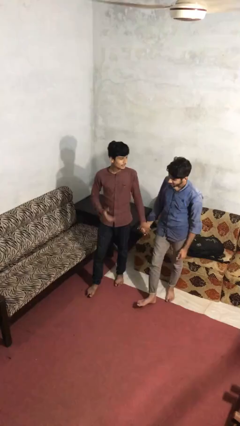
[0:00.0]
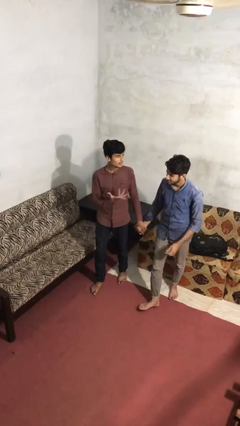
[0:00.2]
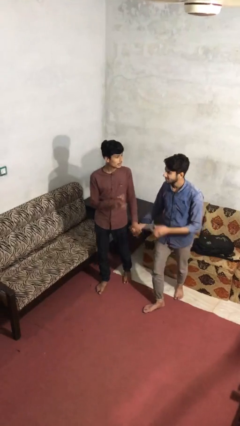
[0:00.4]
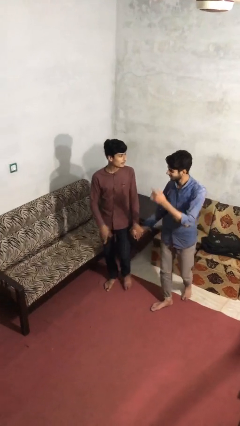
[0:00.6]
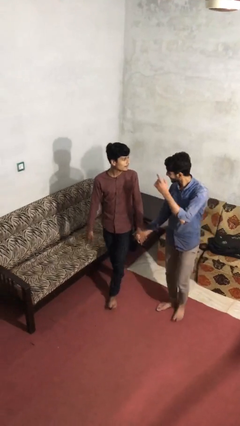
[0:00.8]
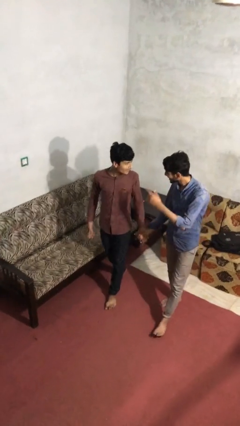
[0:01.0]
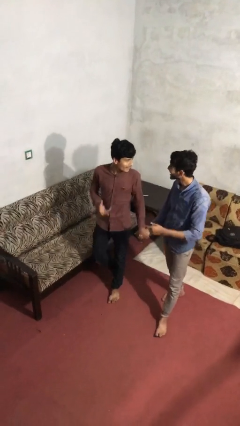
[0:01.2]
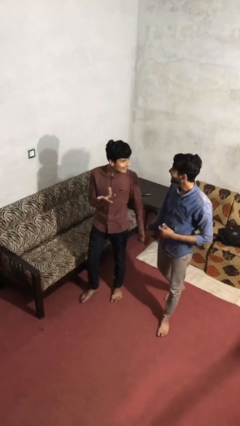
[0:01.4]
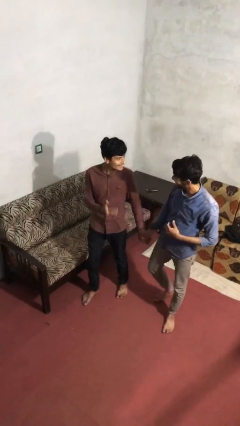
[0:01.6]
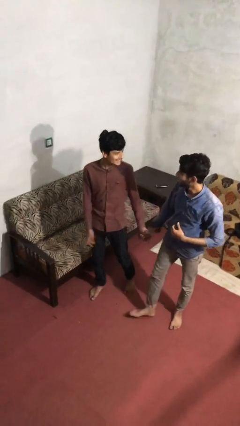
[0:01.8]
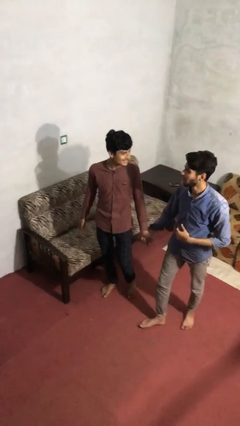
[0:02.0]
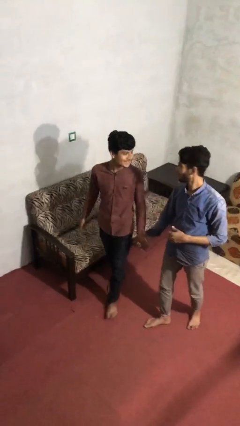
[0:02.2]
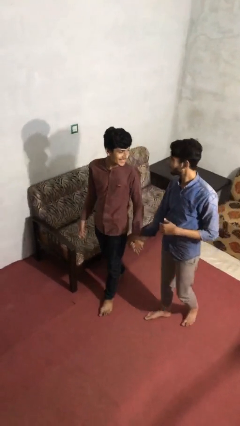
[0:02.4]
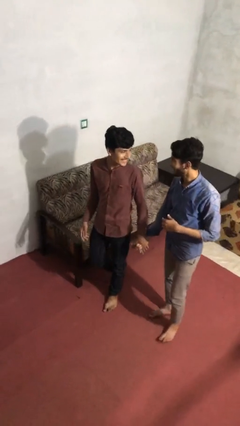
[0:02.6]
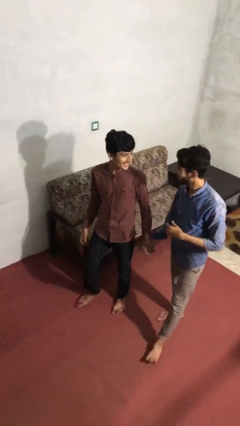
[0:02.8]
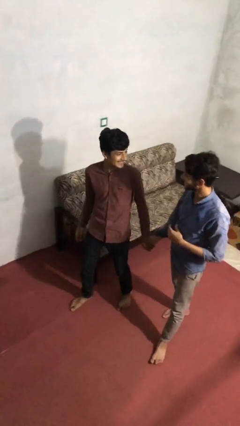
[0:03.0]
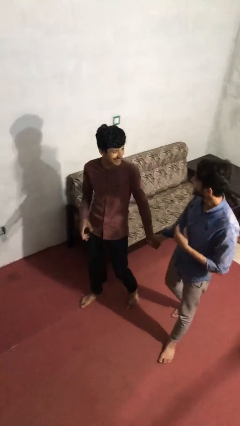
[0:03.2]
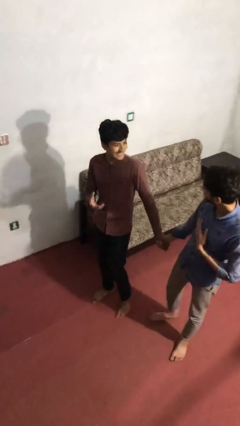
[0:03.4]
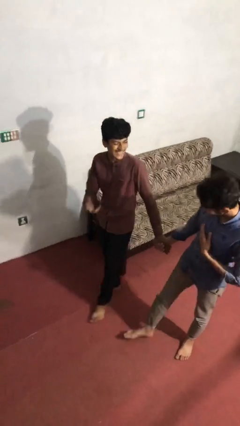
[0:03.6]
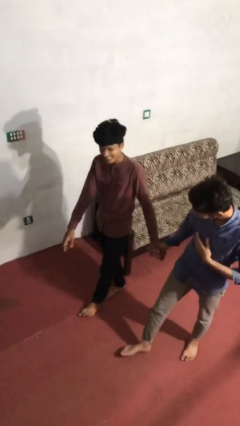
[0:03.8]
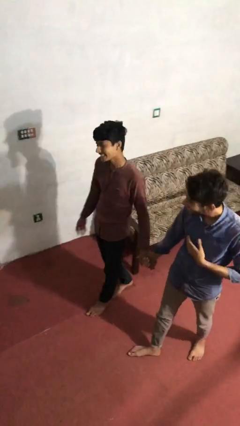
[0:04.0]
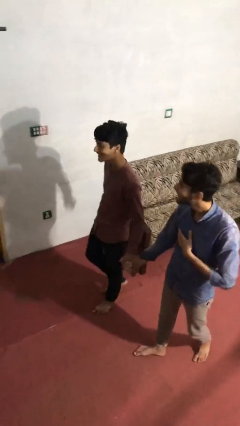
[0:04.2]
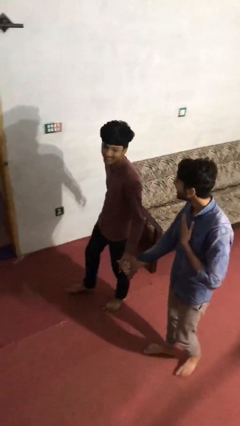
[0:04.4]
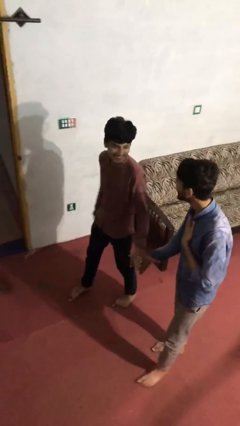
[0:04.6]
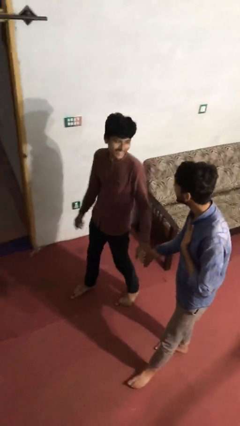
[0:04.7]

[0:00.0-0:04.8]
person holds hand

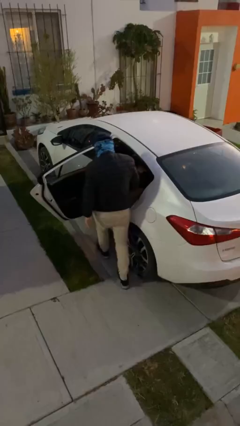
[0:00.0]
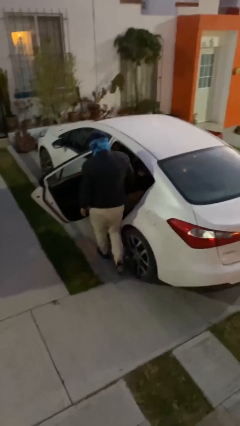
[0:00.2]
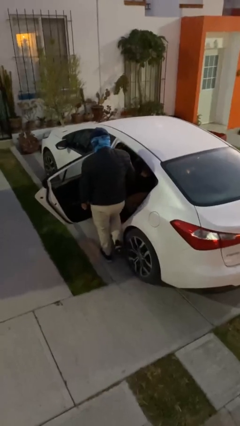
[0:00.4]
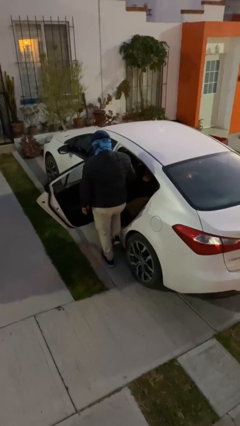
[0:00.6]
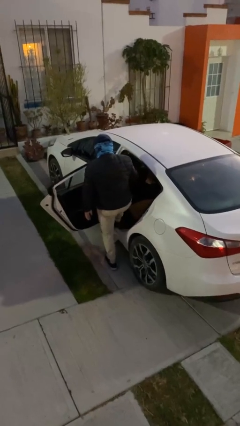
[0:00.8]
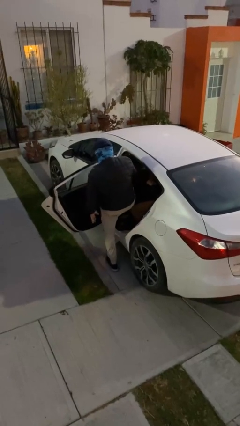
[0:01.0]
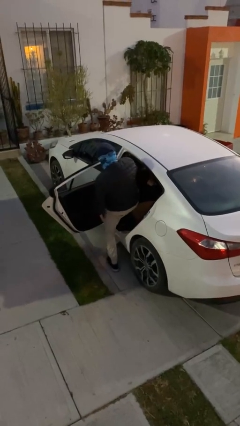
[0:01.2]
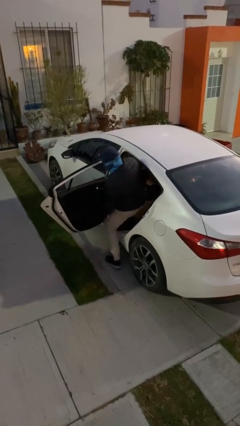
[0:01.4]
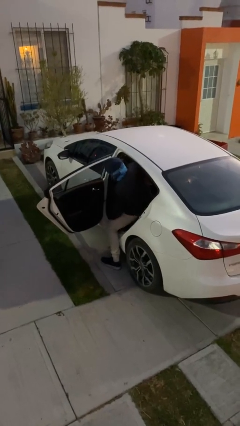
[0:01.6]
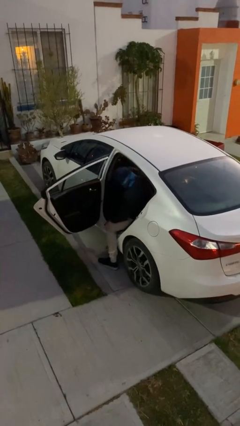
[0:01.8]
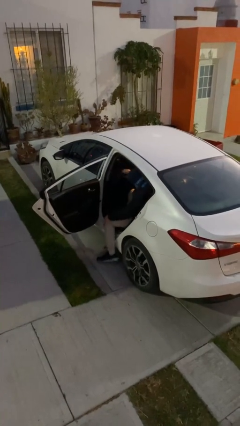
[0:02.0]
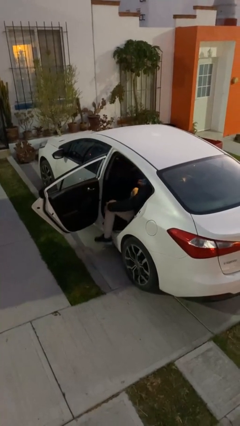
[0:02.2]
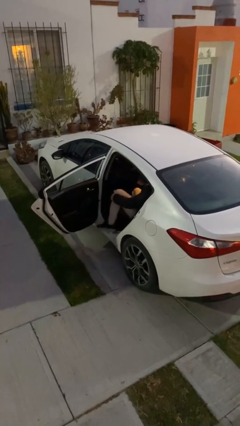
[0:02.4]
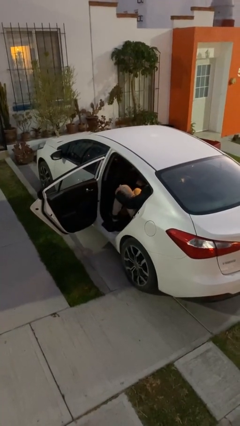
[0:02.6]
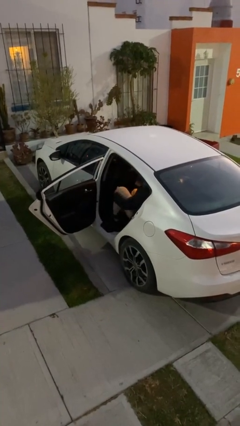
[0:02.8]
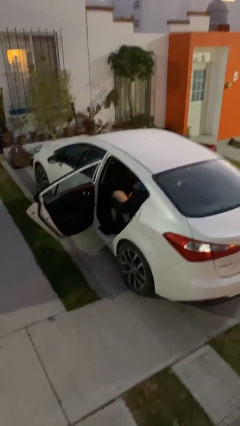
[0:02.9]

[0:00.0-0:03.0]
person enters car

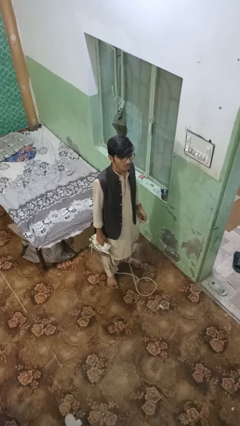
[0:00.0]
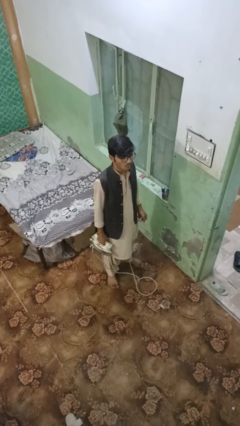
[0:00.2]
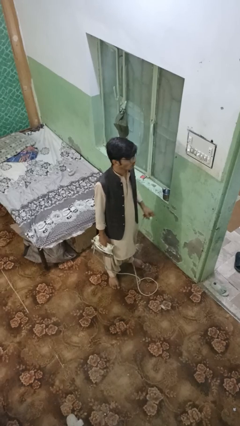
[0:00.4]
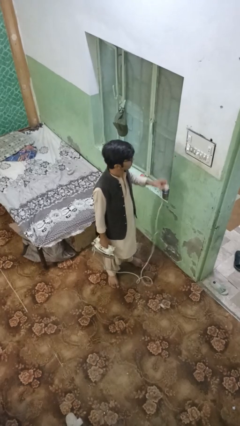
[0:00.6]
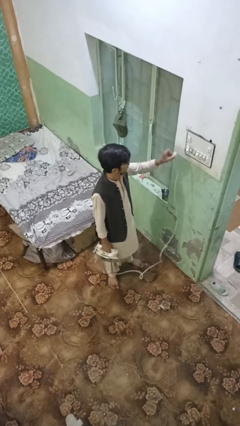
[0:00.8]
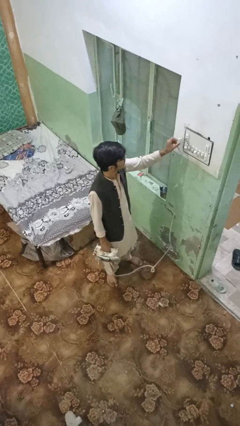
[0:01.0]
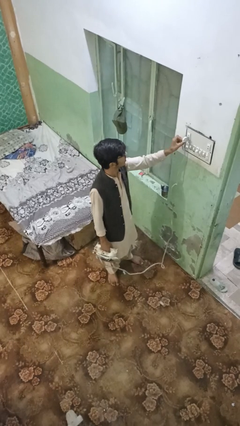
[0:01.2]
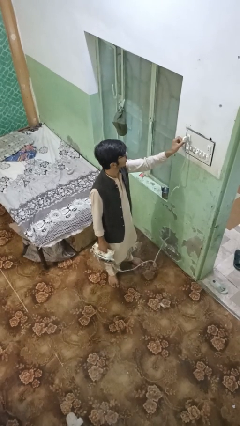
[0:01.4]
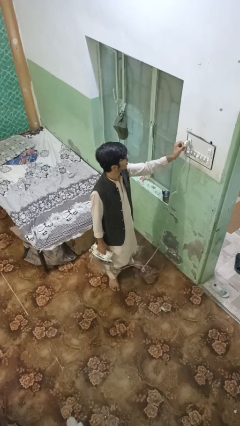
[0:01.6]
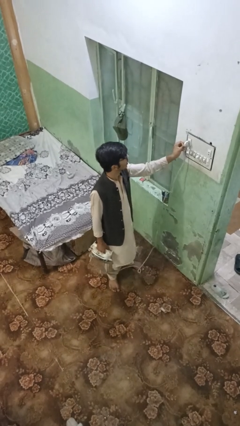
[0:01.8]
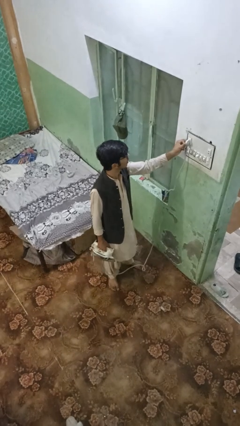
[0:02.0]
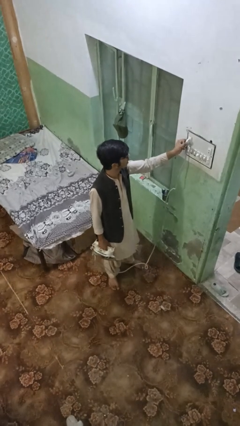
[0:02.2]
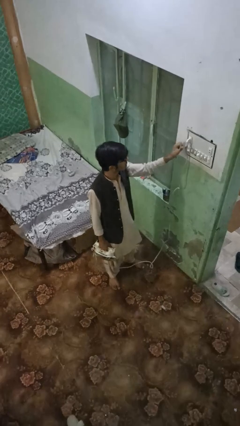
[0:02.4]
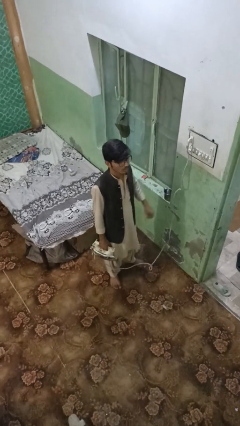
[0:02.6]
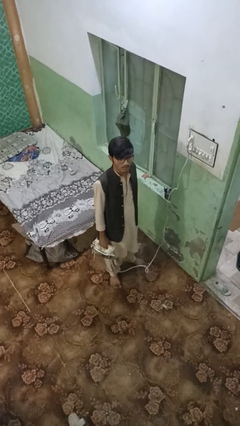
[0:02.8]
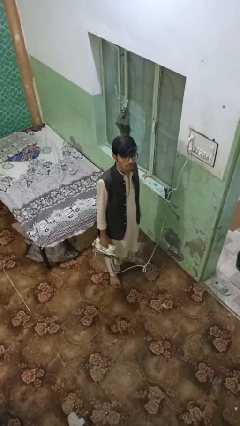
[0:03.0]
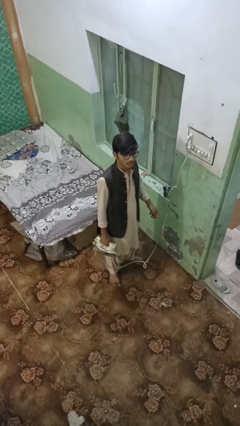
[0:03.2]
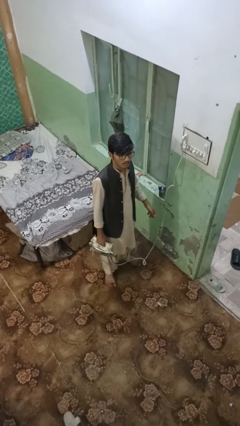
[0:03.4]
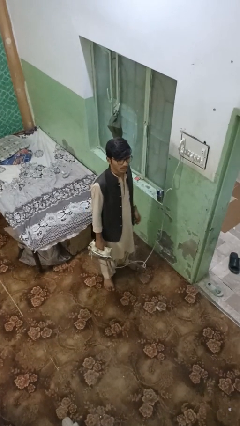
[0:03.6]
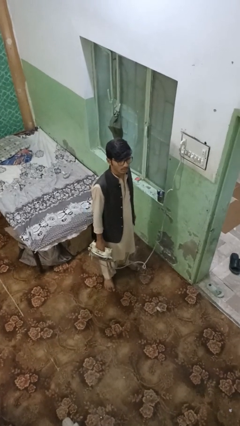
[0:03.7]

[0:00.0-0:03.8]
person plugs into electrical socket

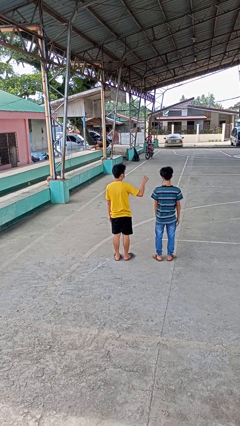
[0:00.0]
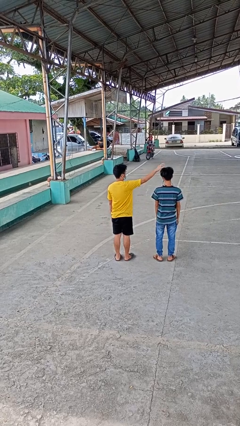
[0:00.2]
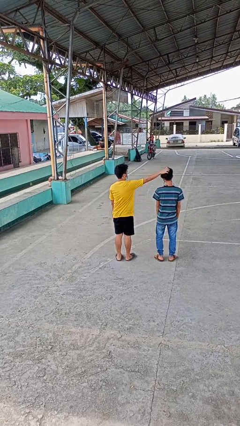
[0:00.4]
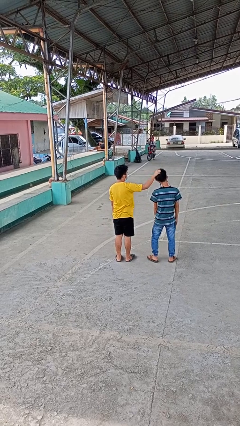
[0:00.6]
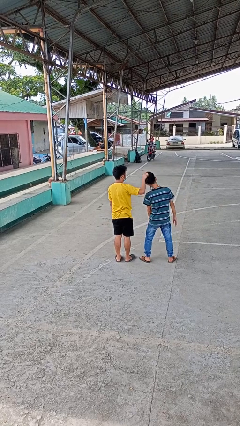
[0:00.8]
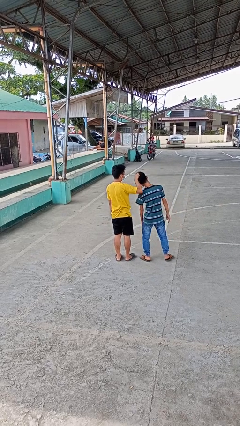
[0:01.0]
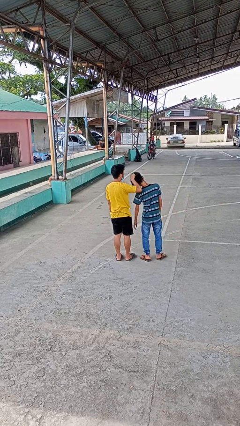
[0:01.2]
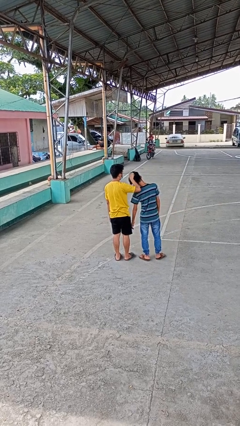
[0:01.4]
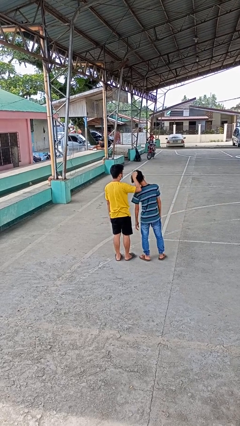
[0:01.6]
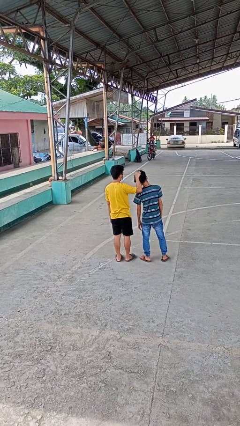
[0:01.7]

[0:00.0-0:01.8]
person grabs person by hair

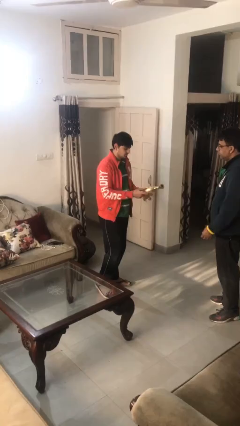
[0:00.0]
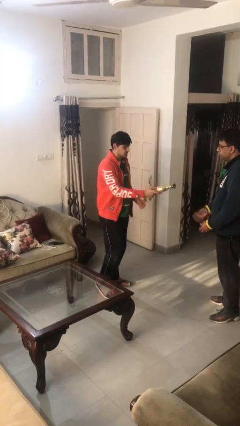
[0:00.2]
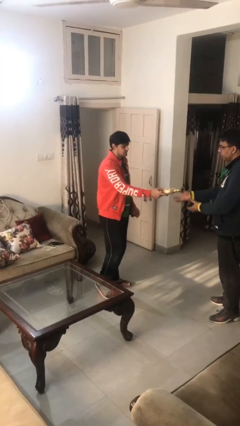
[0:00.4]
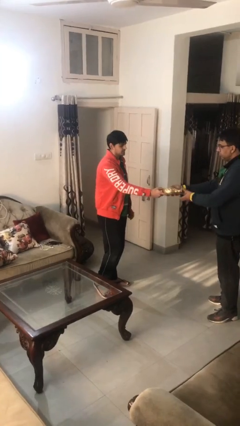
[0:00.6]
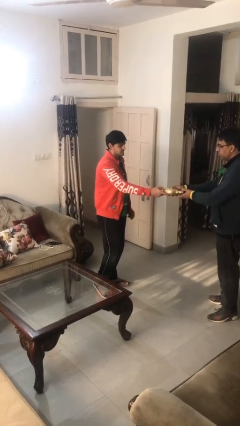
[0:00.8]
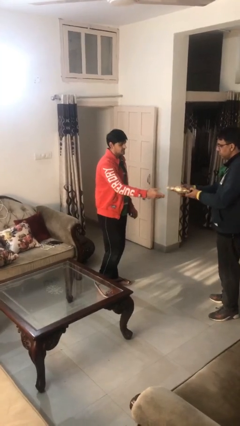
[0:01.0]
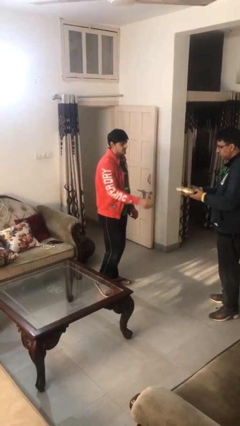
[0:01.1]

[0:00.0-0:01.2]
person transfers object to person

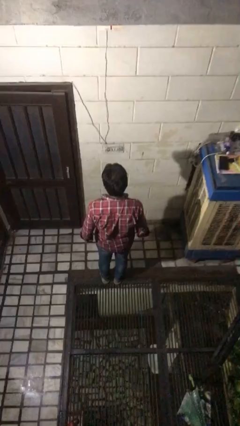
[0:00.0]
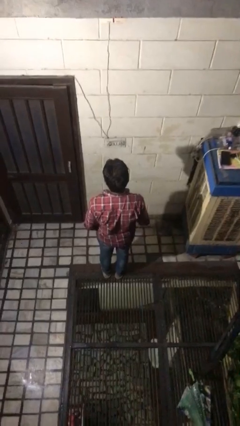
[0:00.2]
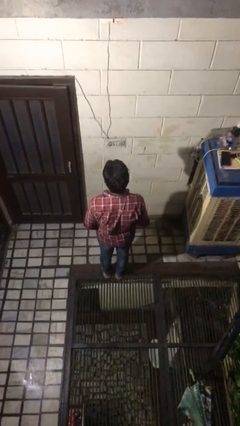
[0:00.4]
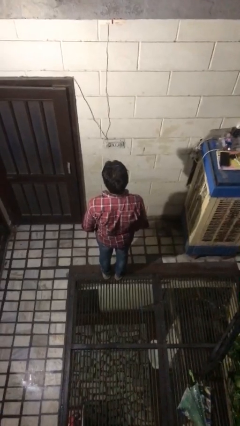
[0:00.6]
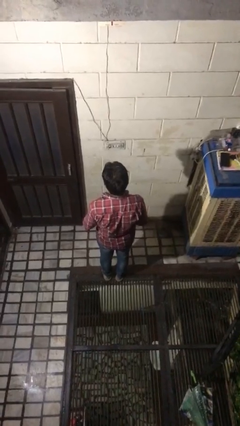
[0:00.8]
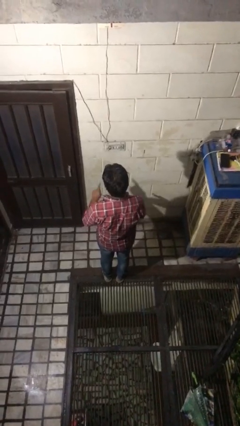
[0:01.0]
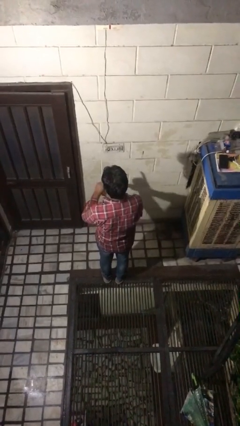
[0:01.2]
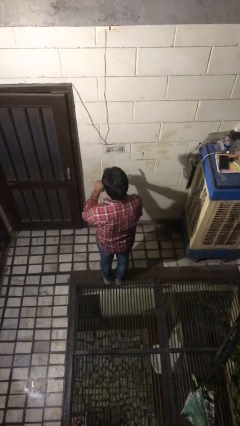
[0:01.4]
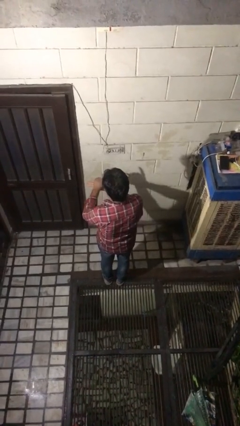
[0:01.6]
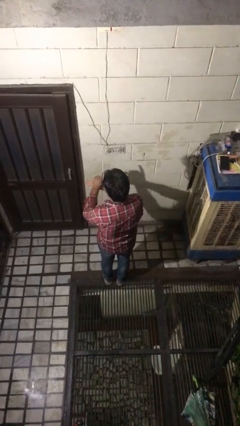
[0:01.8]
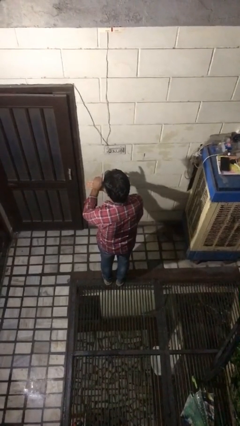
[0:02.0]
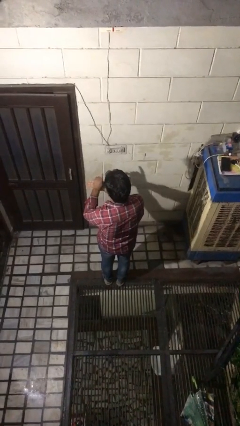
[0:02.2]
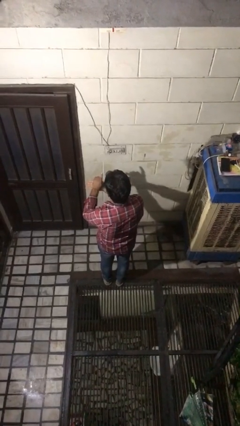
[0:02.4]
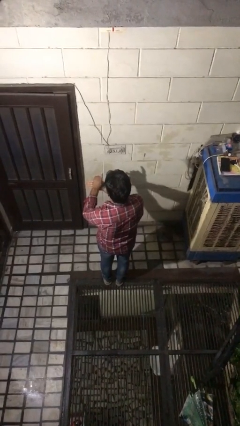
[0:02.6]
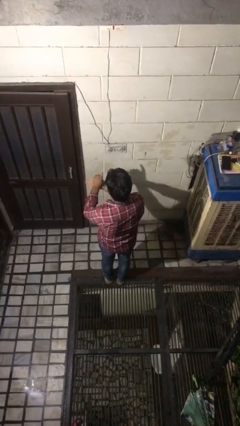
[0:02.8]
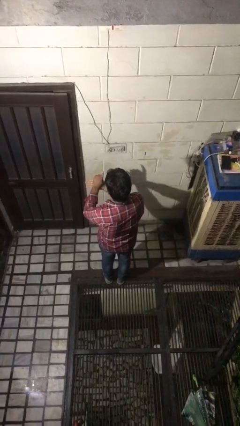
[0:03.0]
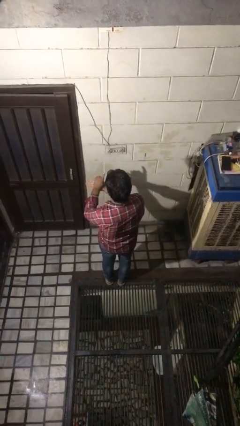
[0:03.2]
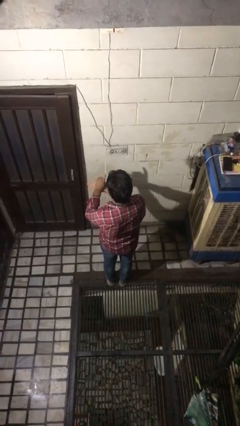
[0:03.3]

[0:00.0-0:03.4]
person gestures number one
